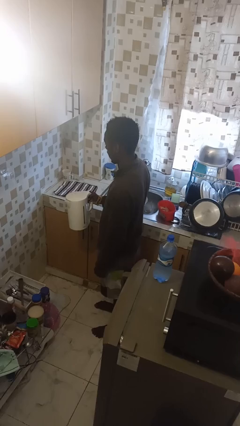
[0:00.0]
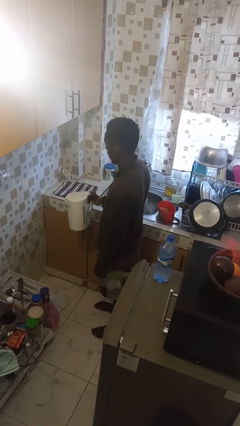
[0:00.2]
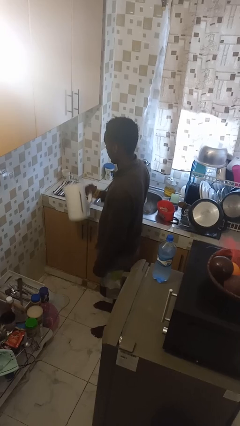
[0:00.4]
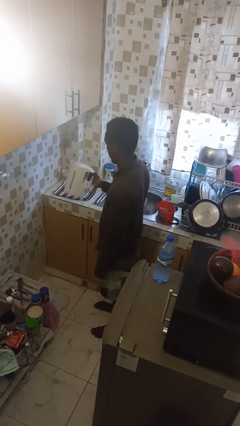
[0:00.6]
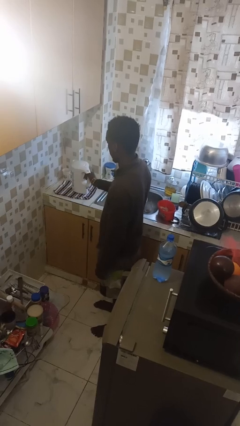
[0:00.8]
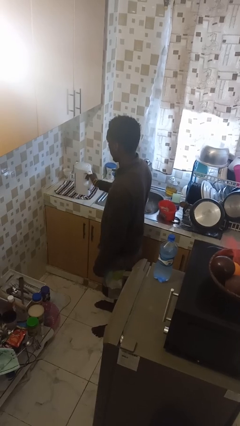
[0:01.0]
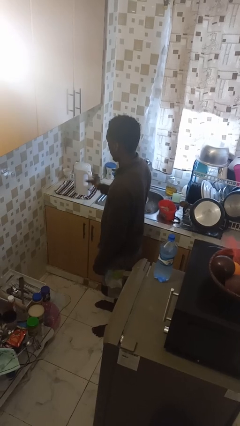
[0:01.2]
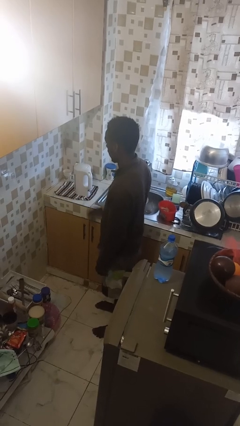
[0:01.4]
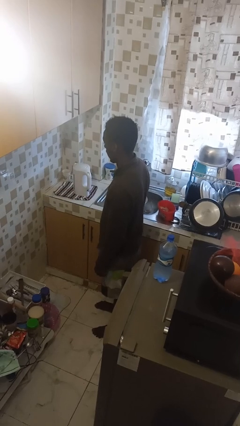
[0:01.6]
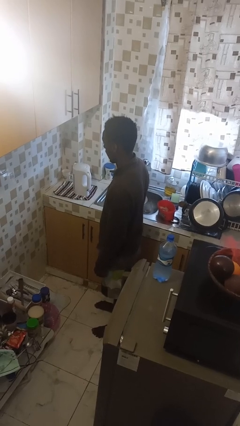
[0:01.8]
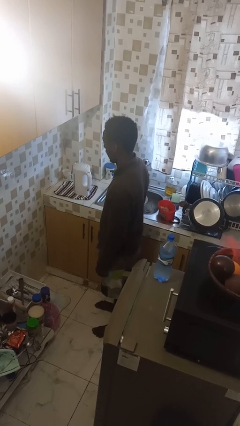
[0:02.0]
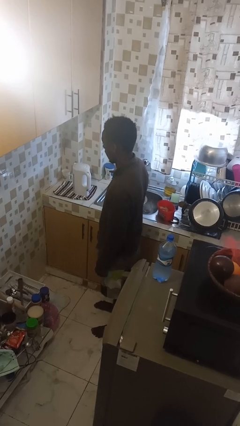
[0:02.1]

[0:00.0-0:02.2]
person puts down object on countertop

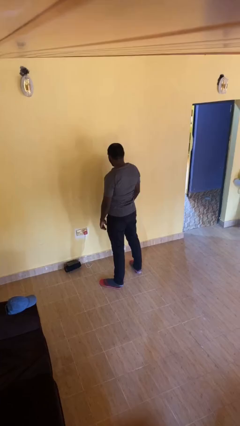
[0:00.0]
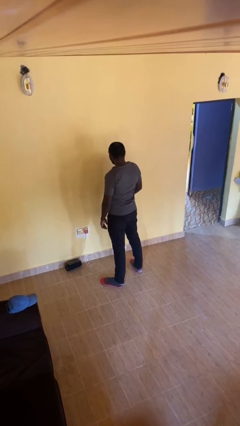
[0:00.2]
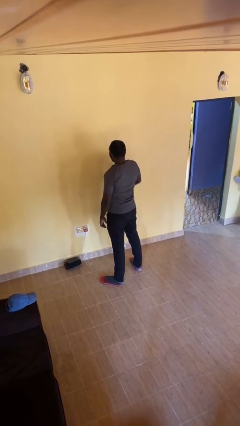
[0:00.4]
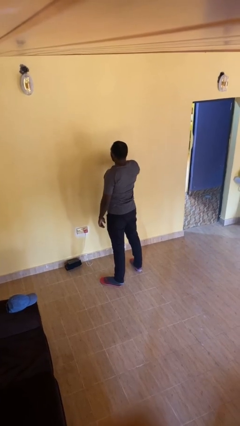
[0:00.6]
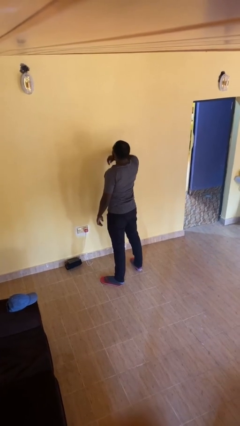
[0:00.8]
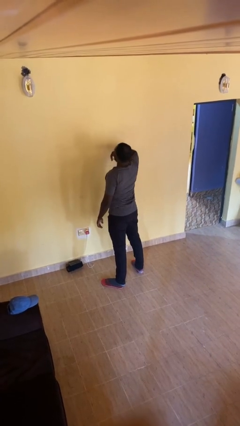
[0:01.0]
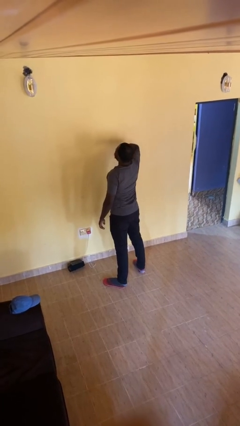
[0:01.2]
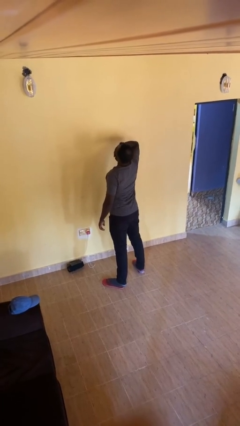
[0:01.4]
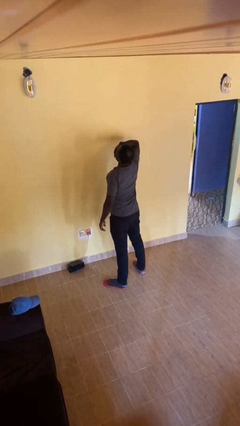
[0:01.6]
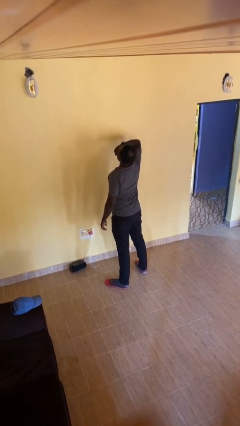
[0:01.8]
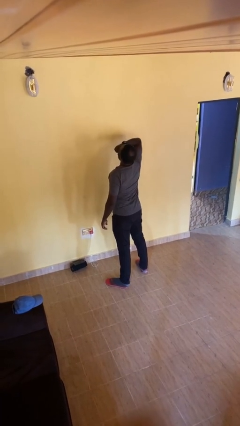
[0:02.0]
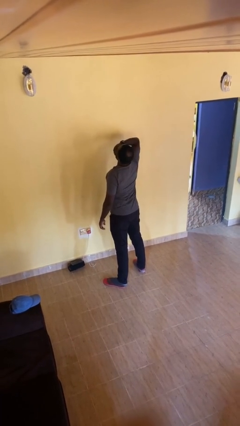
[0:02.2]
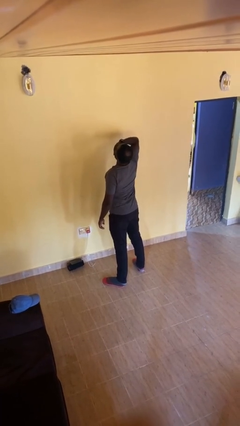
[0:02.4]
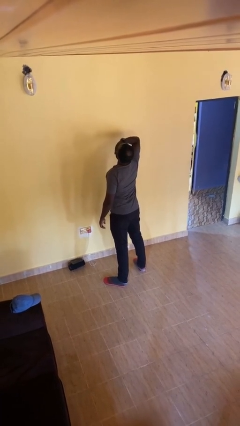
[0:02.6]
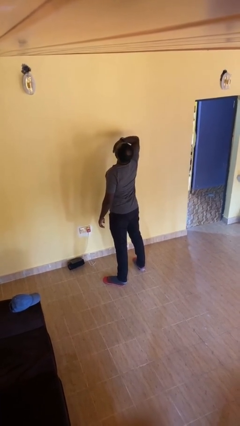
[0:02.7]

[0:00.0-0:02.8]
person yawns

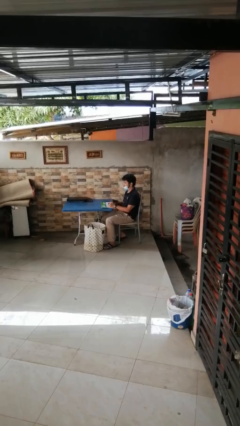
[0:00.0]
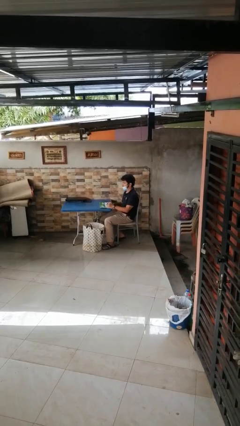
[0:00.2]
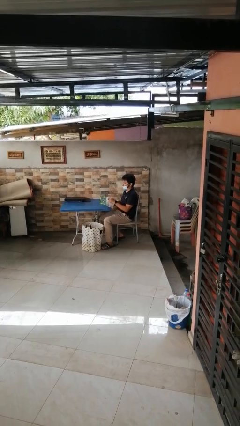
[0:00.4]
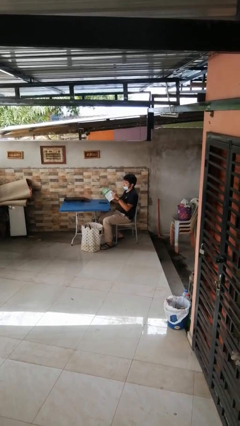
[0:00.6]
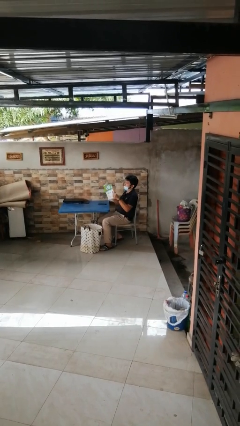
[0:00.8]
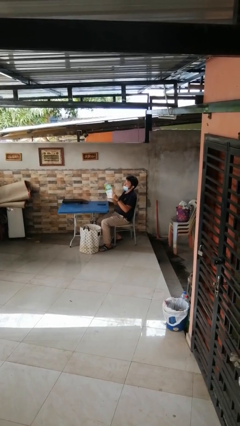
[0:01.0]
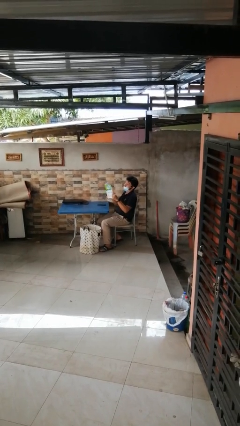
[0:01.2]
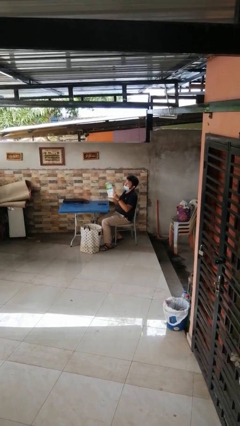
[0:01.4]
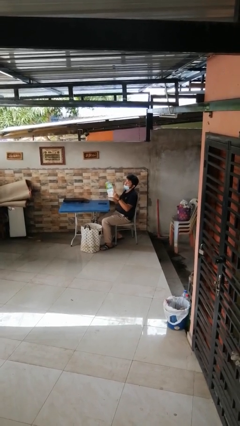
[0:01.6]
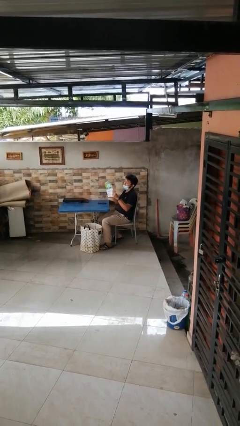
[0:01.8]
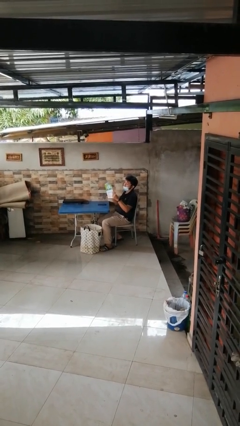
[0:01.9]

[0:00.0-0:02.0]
person reads magazine

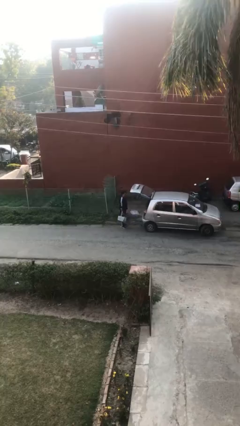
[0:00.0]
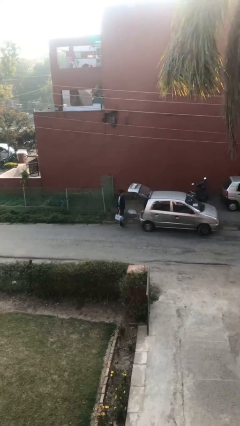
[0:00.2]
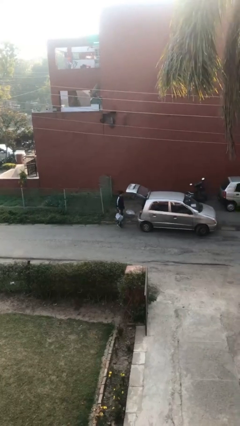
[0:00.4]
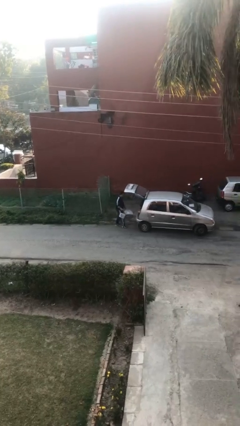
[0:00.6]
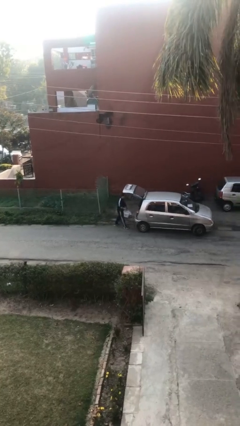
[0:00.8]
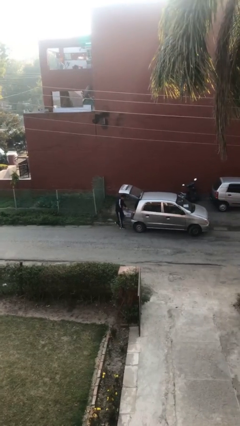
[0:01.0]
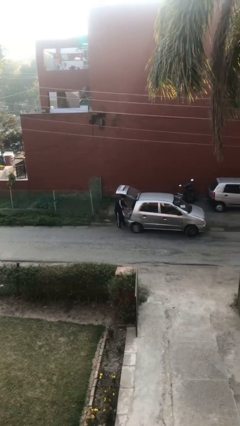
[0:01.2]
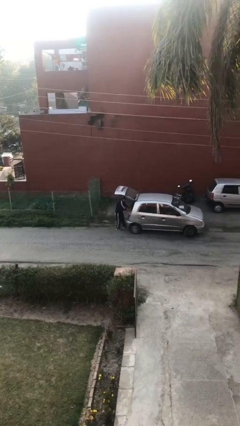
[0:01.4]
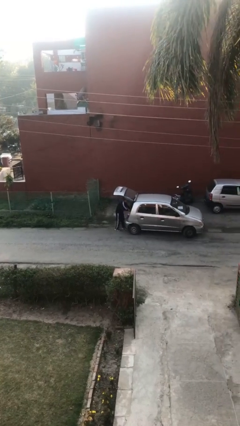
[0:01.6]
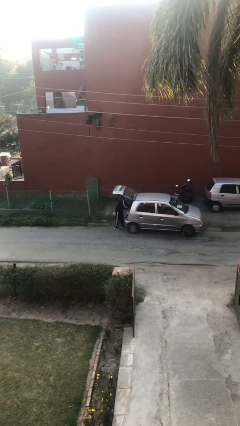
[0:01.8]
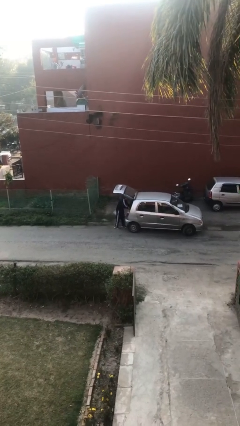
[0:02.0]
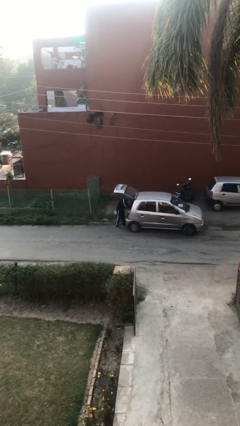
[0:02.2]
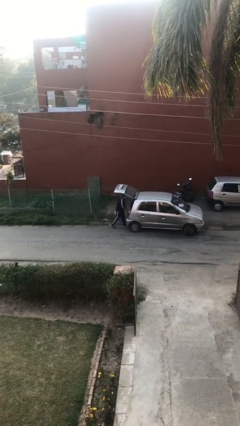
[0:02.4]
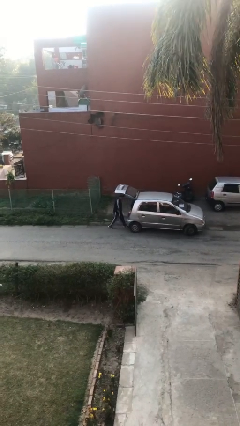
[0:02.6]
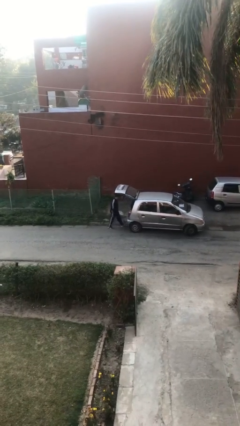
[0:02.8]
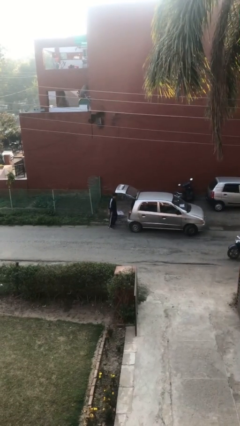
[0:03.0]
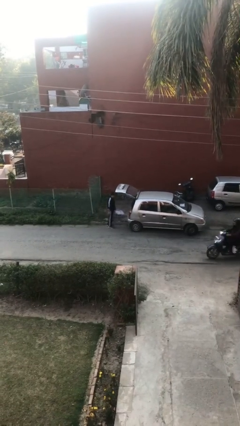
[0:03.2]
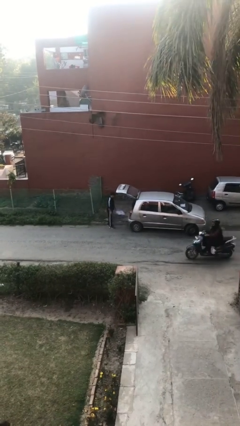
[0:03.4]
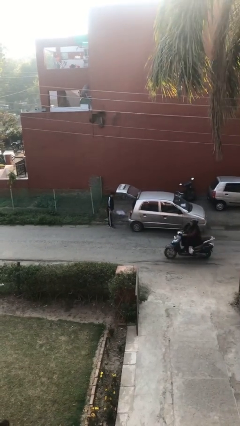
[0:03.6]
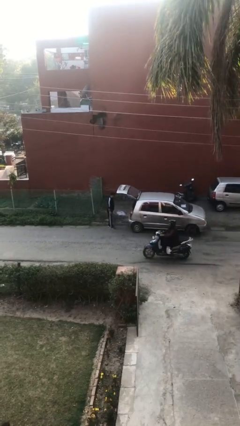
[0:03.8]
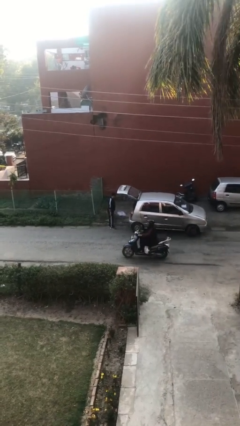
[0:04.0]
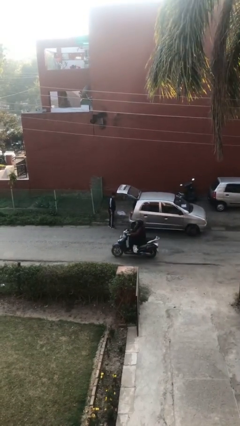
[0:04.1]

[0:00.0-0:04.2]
person loads car

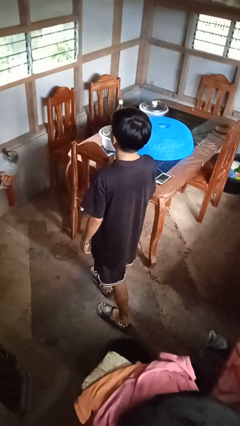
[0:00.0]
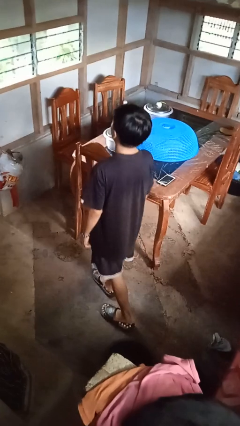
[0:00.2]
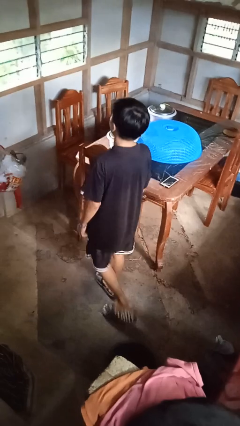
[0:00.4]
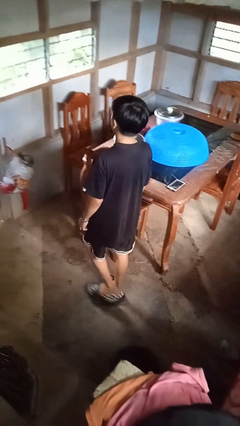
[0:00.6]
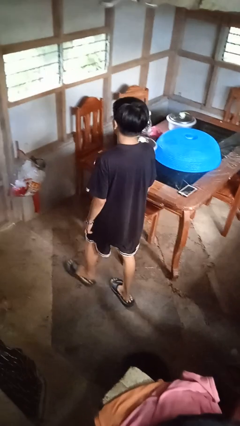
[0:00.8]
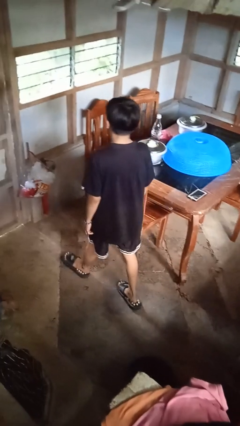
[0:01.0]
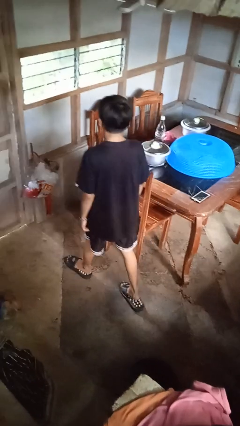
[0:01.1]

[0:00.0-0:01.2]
person stubs toe

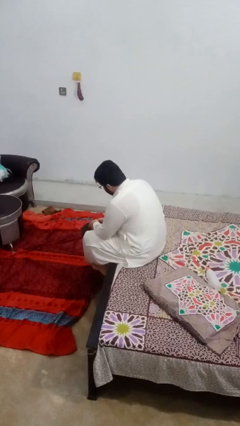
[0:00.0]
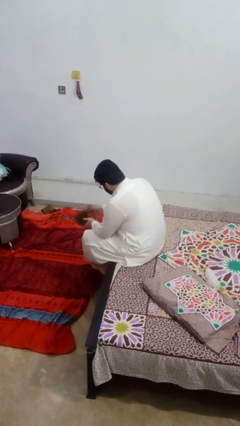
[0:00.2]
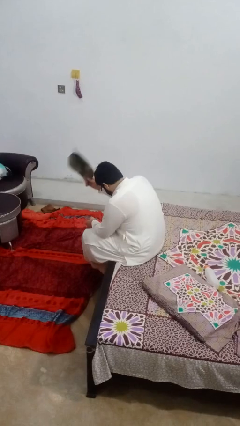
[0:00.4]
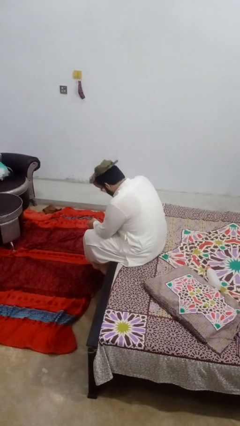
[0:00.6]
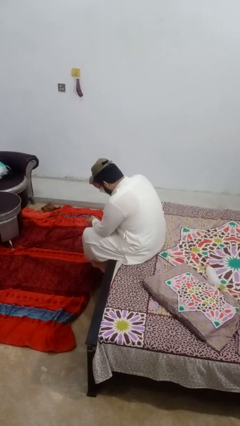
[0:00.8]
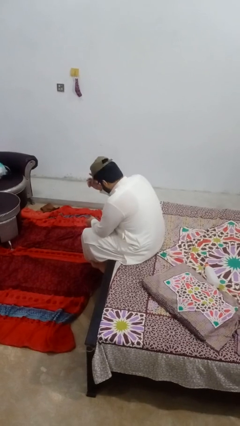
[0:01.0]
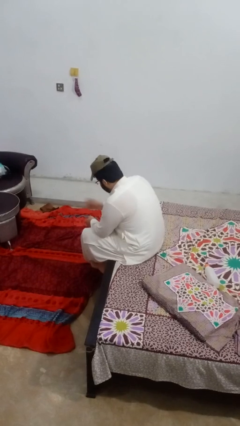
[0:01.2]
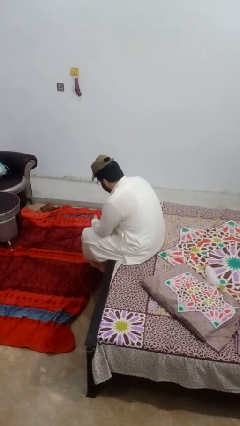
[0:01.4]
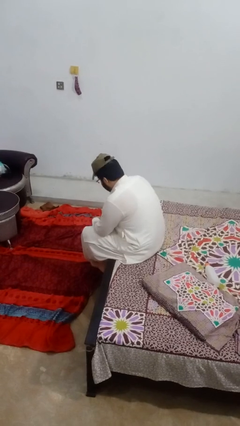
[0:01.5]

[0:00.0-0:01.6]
person puts on hat

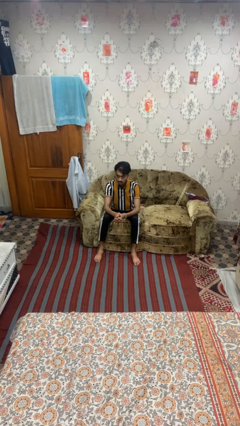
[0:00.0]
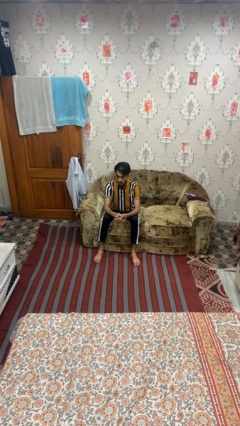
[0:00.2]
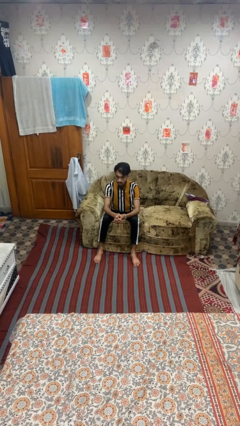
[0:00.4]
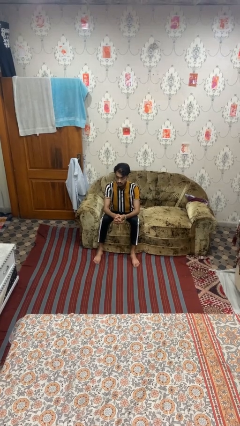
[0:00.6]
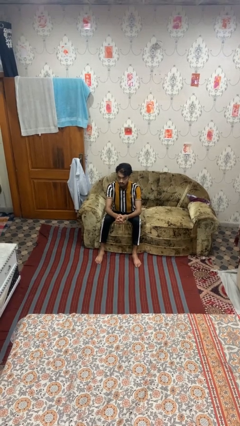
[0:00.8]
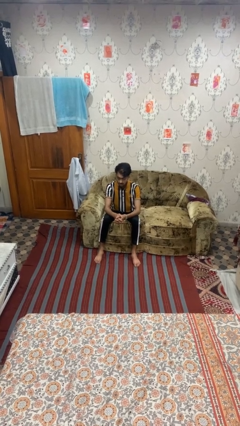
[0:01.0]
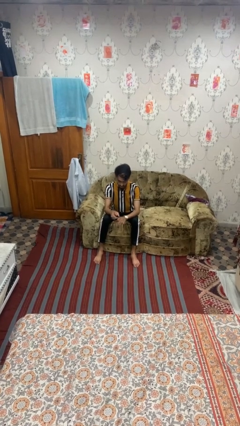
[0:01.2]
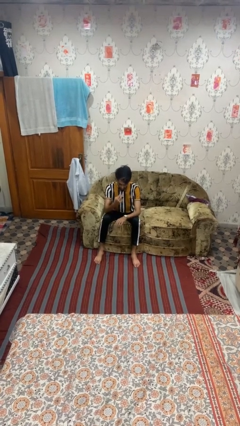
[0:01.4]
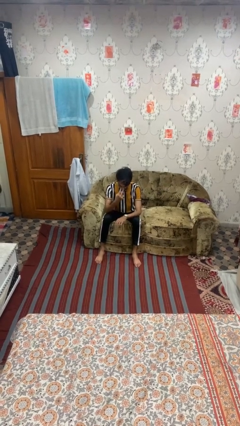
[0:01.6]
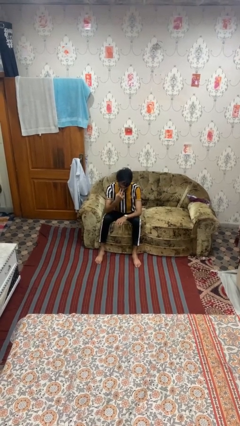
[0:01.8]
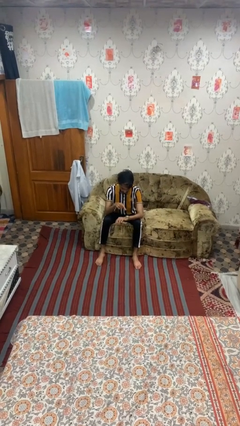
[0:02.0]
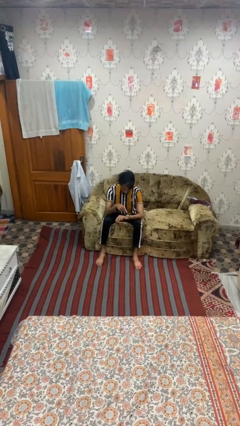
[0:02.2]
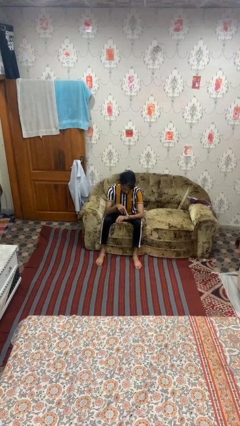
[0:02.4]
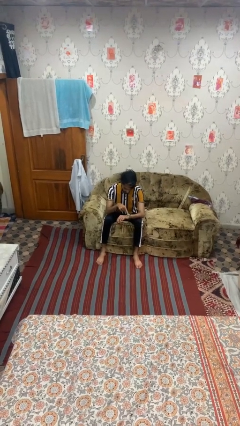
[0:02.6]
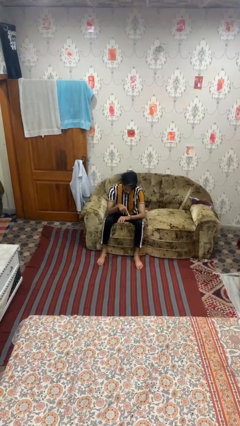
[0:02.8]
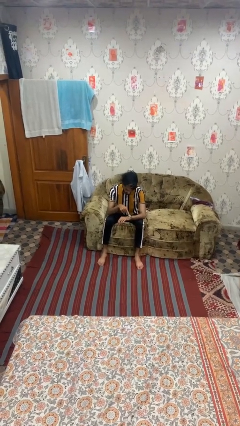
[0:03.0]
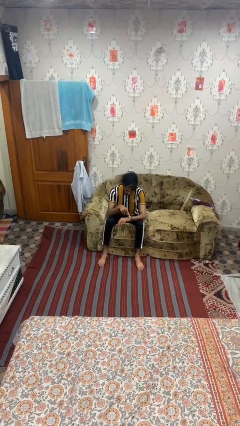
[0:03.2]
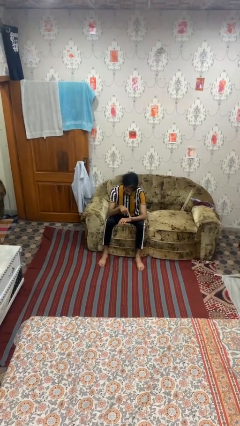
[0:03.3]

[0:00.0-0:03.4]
person gestures watch closely
